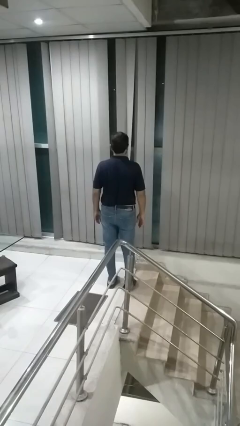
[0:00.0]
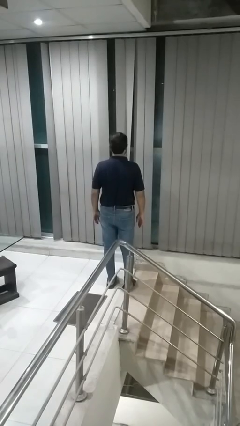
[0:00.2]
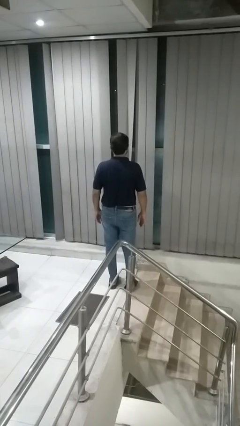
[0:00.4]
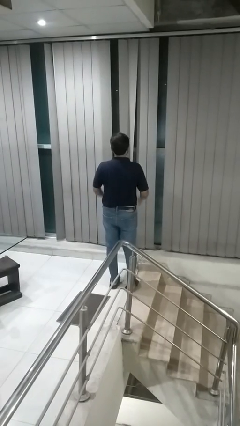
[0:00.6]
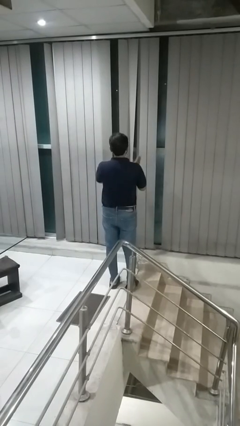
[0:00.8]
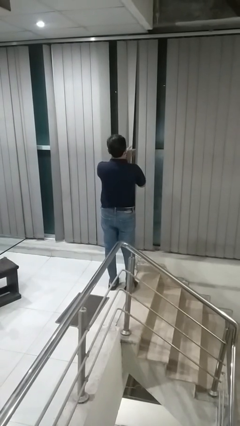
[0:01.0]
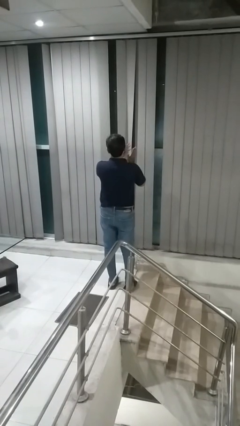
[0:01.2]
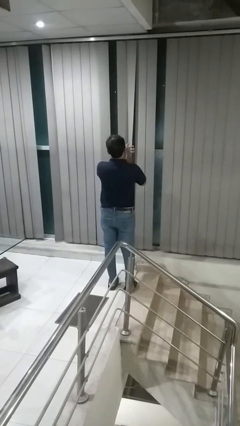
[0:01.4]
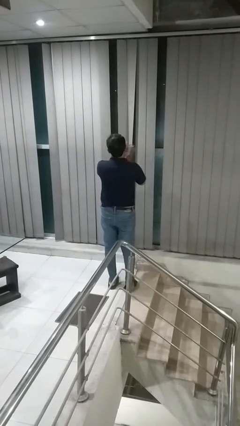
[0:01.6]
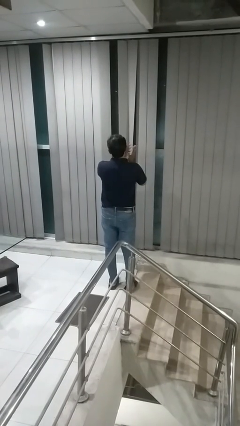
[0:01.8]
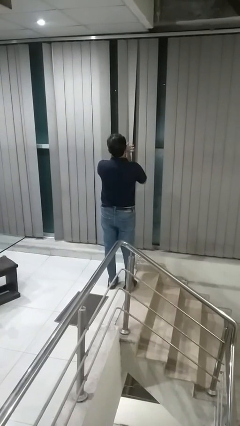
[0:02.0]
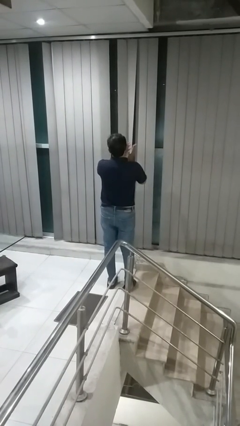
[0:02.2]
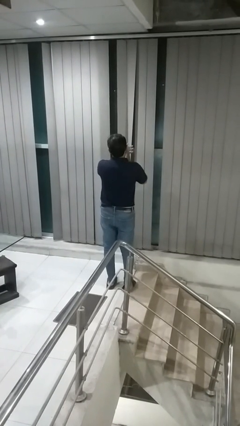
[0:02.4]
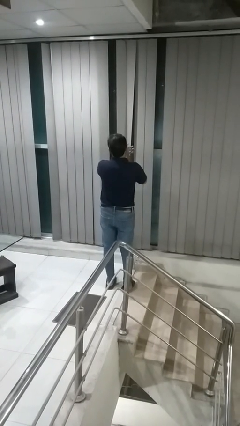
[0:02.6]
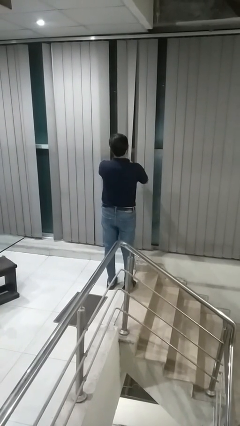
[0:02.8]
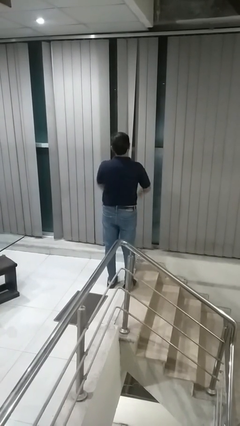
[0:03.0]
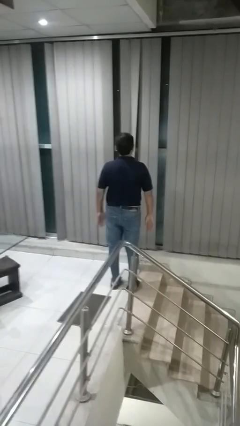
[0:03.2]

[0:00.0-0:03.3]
person claps hands

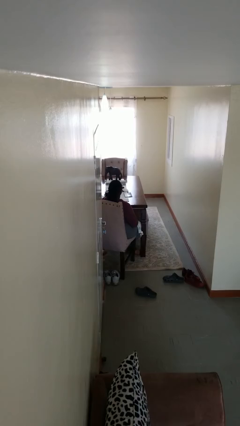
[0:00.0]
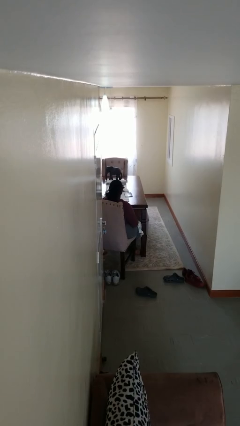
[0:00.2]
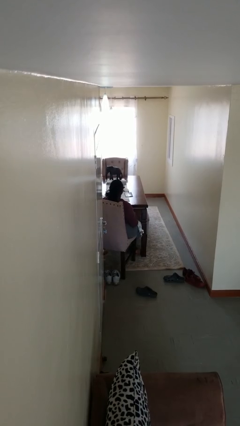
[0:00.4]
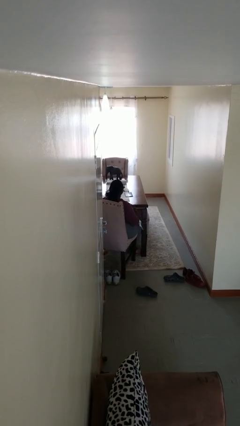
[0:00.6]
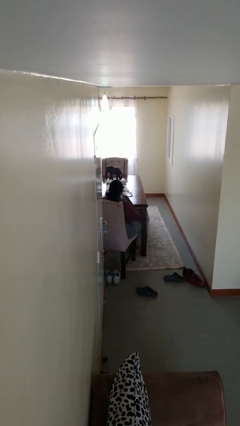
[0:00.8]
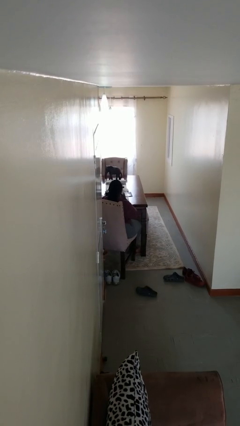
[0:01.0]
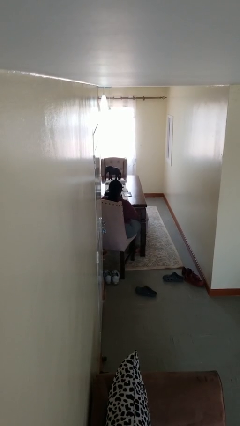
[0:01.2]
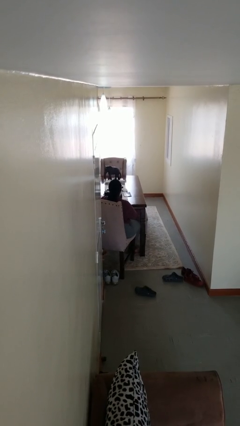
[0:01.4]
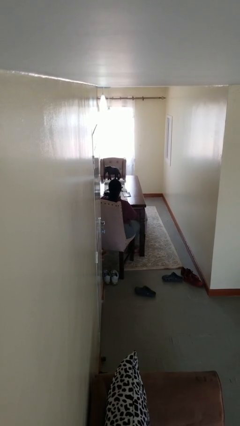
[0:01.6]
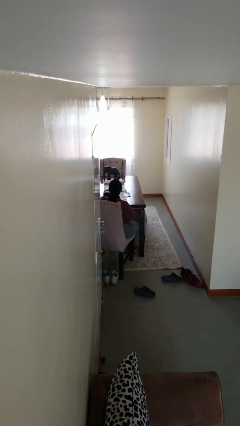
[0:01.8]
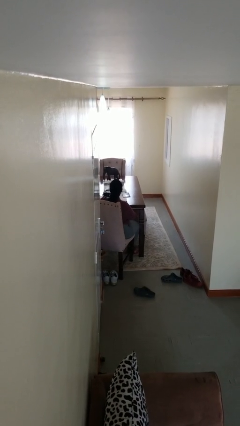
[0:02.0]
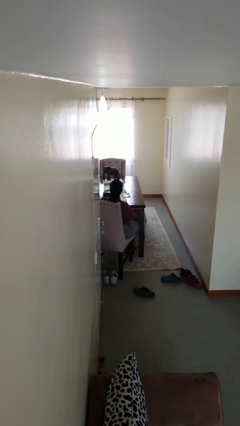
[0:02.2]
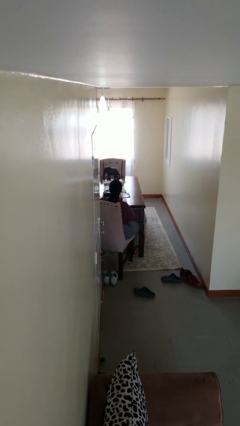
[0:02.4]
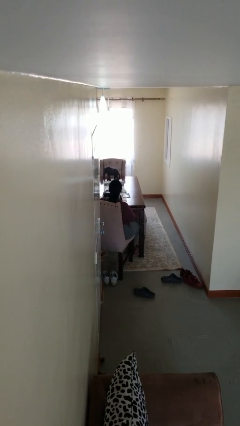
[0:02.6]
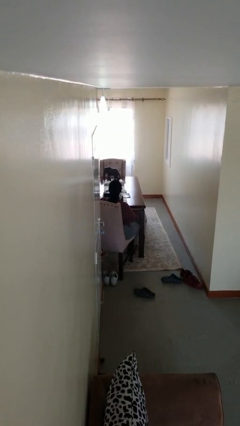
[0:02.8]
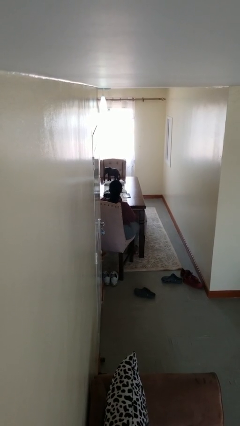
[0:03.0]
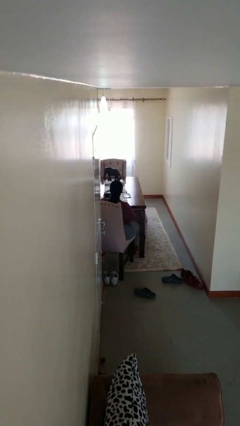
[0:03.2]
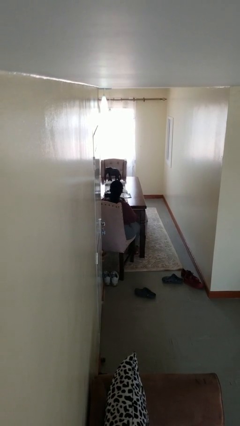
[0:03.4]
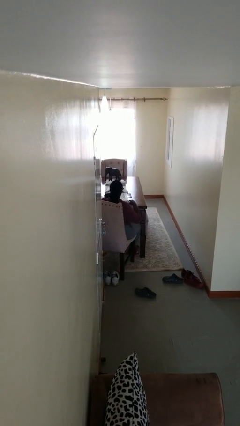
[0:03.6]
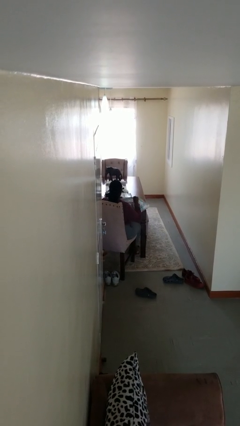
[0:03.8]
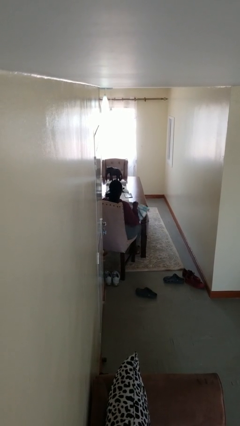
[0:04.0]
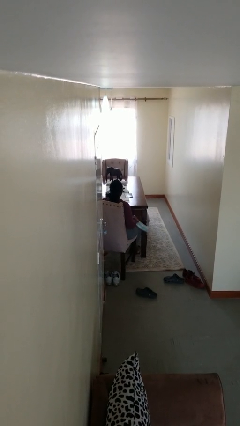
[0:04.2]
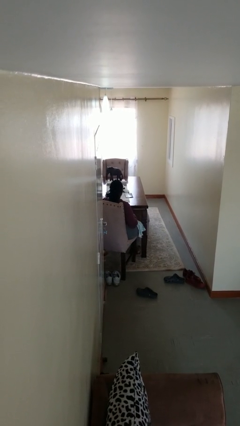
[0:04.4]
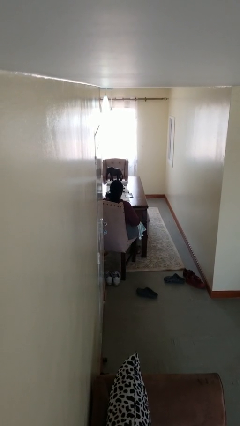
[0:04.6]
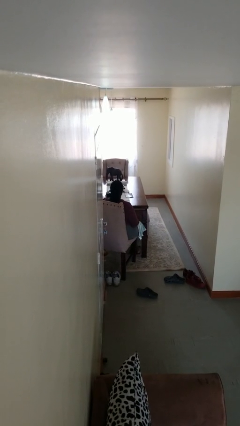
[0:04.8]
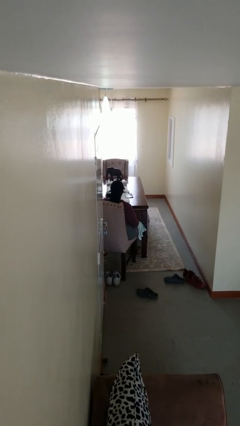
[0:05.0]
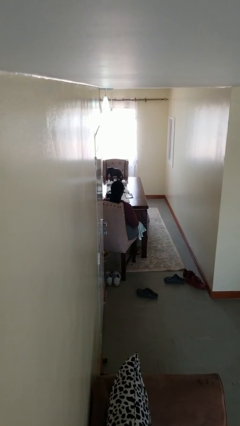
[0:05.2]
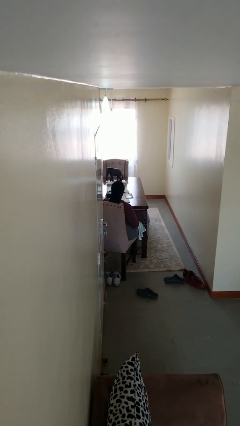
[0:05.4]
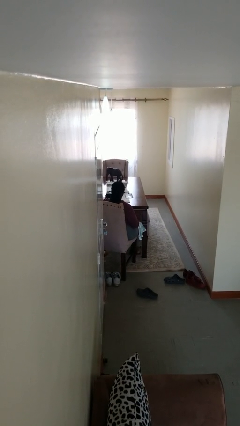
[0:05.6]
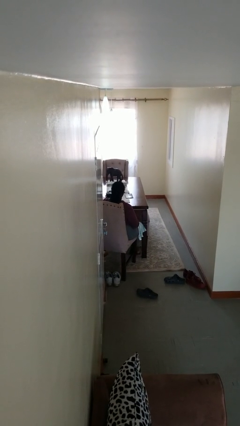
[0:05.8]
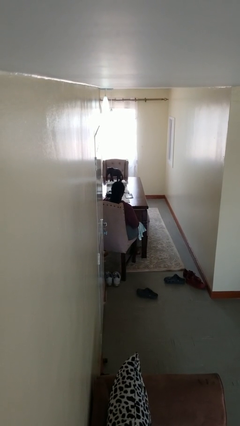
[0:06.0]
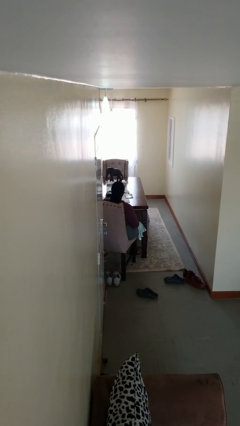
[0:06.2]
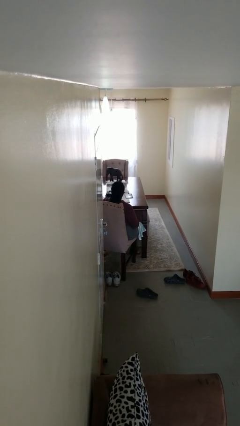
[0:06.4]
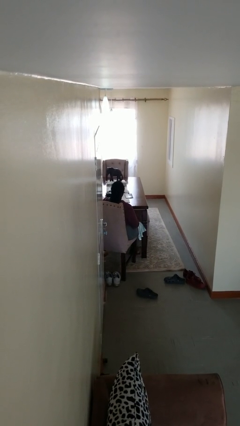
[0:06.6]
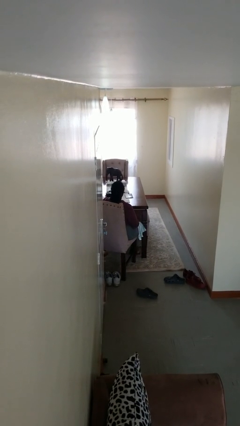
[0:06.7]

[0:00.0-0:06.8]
person wipes mouth with napkin

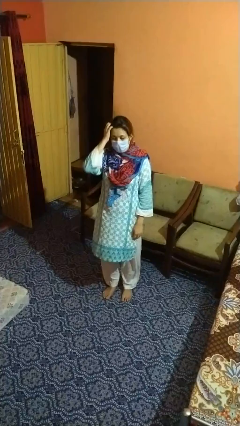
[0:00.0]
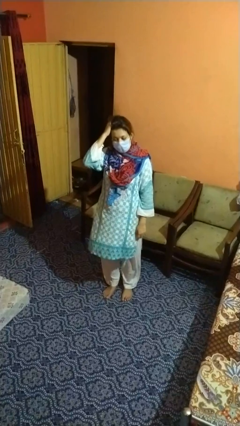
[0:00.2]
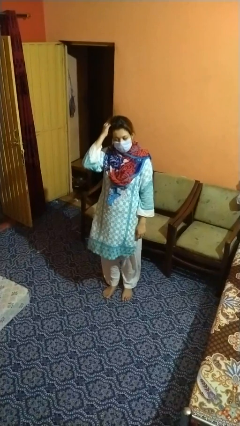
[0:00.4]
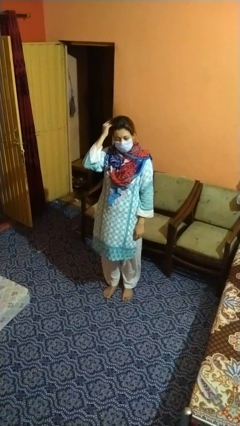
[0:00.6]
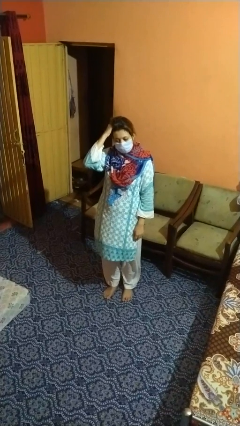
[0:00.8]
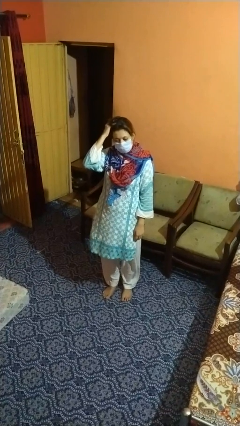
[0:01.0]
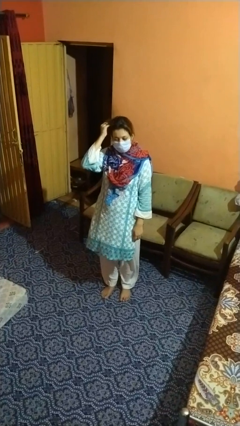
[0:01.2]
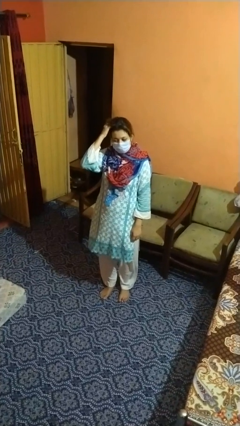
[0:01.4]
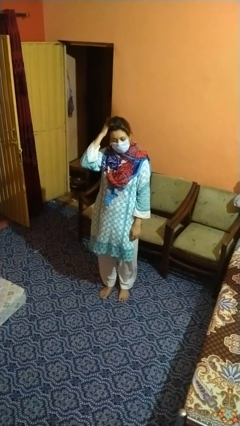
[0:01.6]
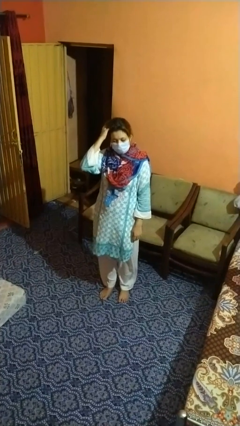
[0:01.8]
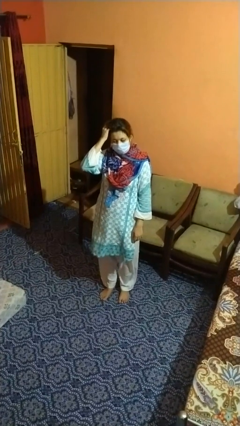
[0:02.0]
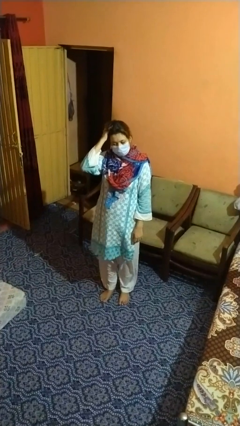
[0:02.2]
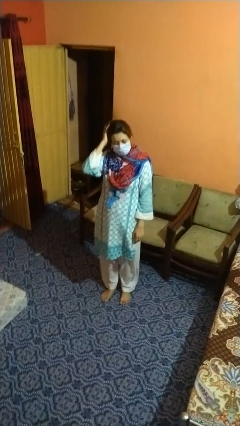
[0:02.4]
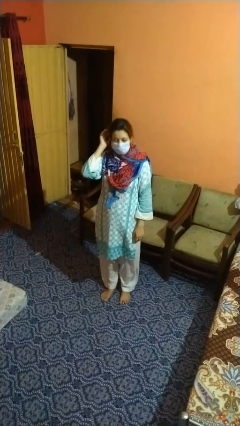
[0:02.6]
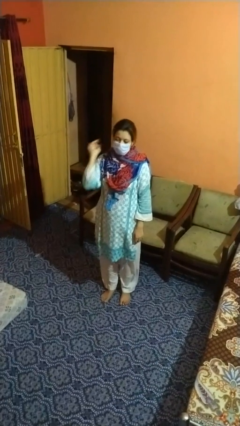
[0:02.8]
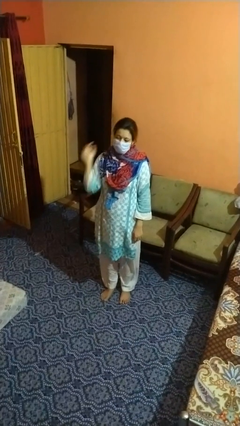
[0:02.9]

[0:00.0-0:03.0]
person strokes hair

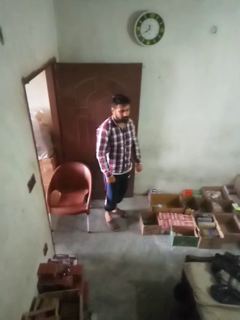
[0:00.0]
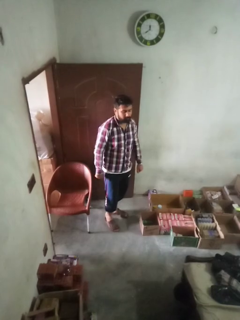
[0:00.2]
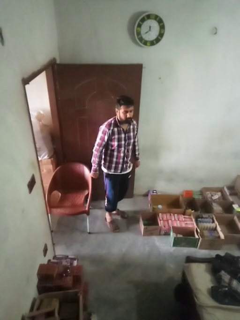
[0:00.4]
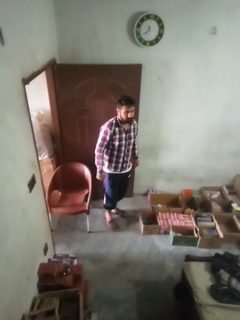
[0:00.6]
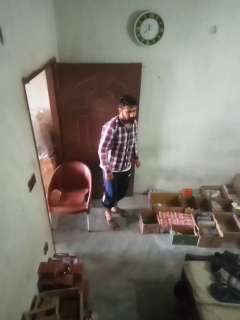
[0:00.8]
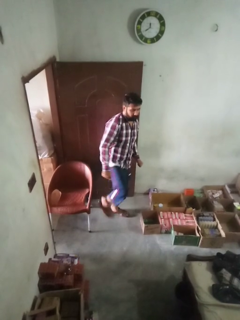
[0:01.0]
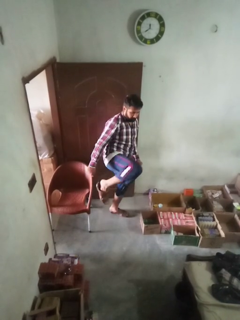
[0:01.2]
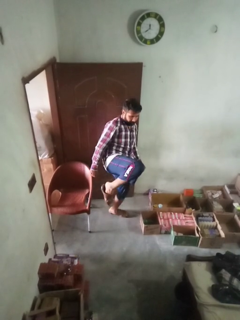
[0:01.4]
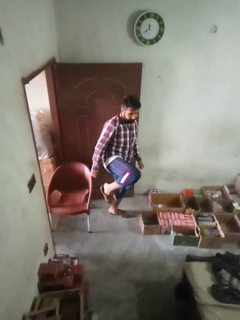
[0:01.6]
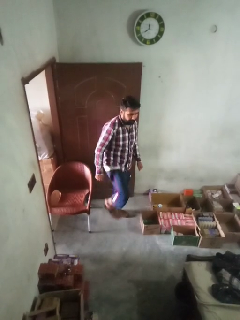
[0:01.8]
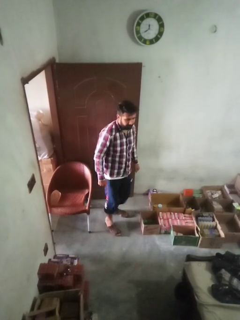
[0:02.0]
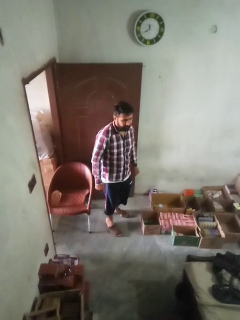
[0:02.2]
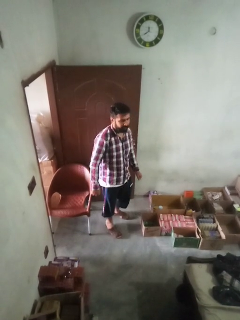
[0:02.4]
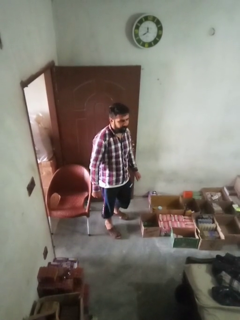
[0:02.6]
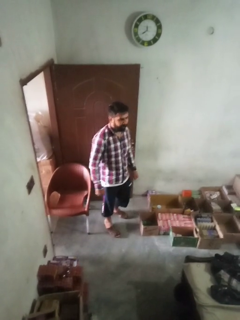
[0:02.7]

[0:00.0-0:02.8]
person karate kicks

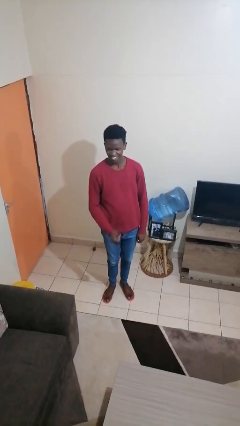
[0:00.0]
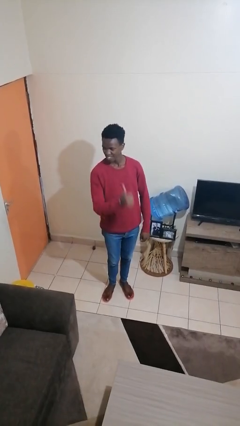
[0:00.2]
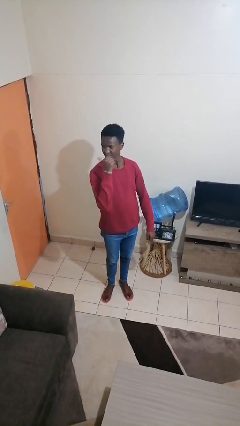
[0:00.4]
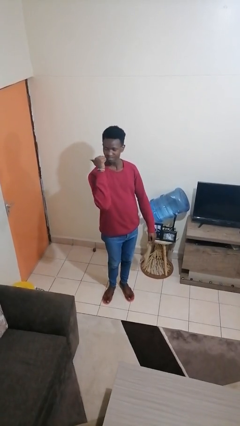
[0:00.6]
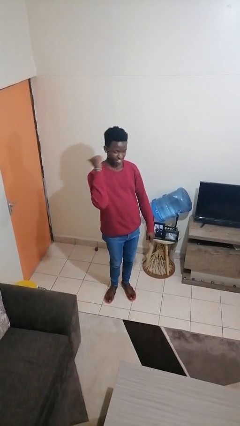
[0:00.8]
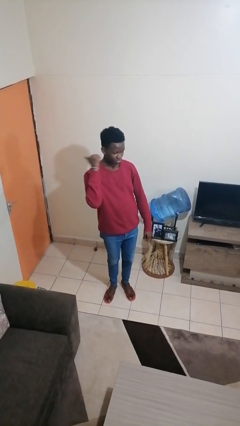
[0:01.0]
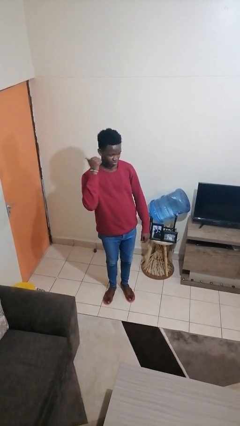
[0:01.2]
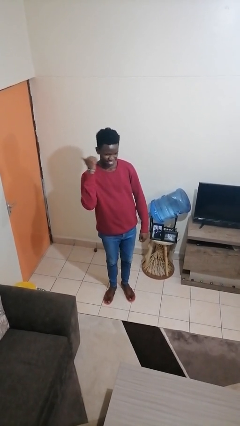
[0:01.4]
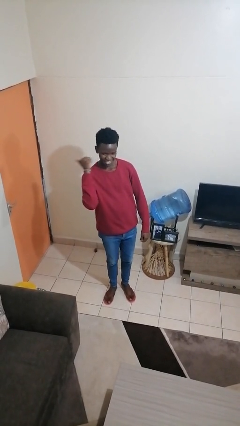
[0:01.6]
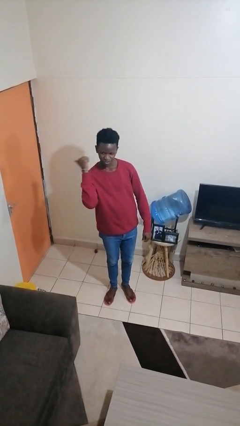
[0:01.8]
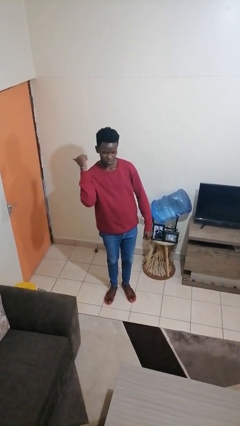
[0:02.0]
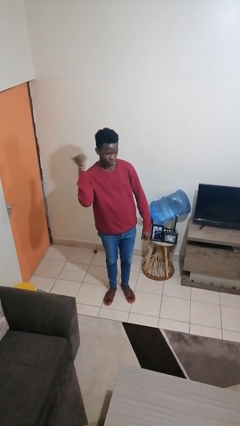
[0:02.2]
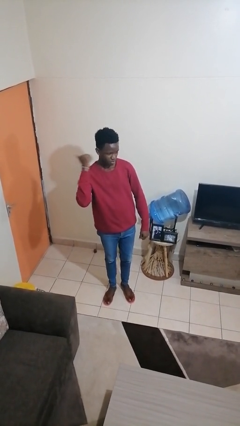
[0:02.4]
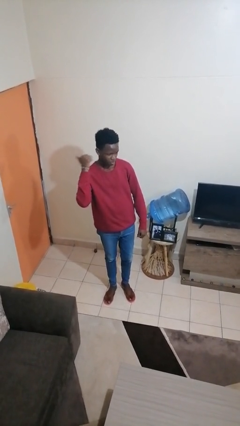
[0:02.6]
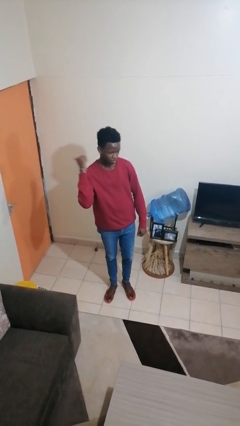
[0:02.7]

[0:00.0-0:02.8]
person gestures behind me
